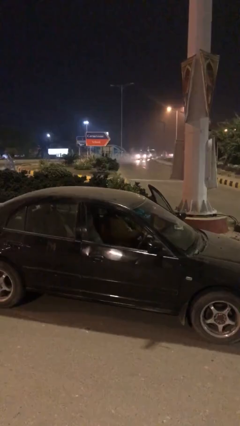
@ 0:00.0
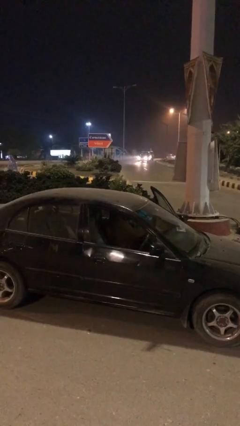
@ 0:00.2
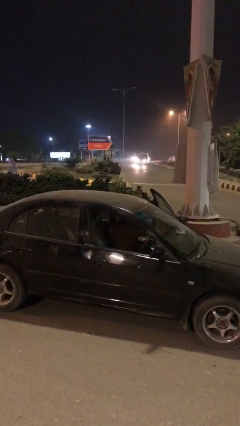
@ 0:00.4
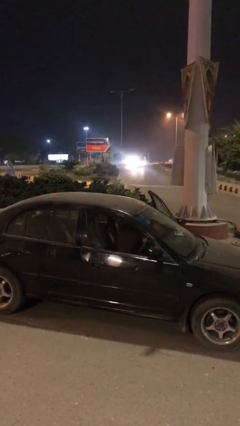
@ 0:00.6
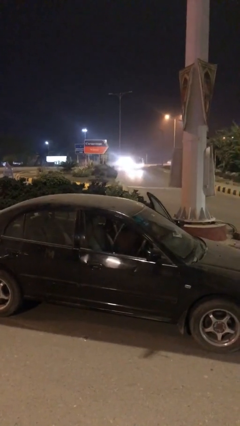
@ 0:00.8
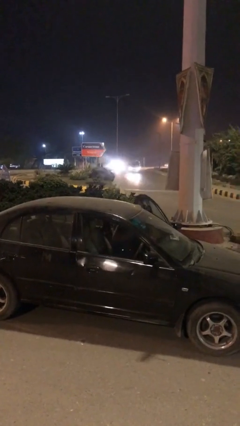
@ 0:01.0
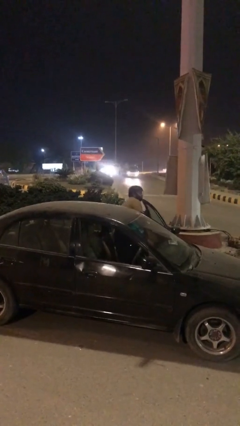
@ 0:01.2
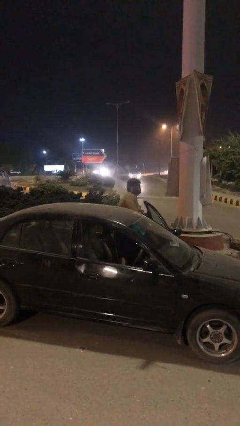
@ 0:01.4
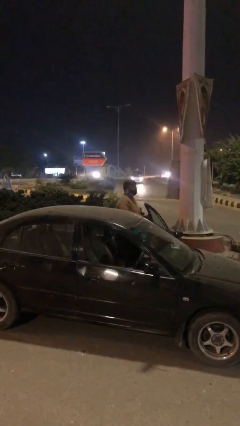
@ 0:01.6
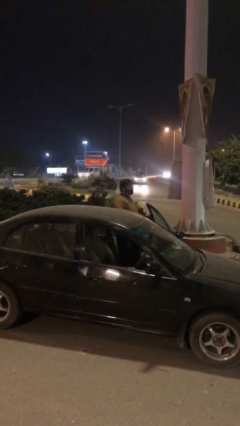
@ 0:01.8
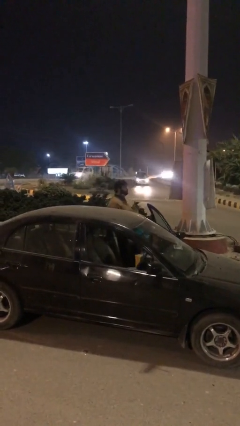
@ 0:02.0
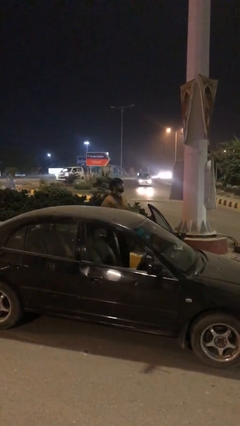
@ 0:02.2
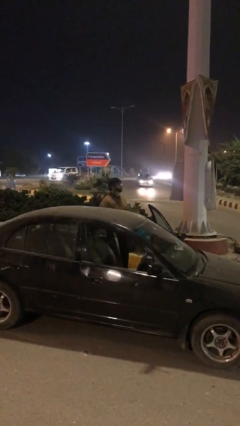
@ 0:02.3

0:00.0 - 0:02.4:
person exits car

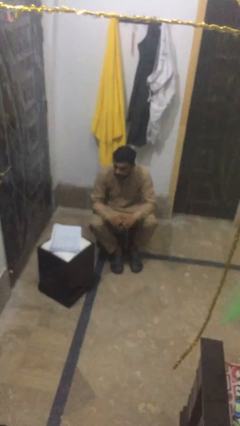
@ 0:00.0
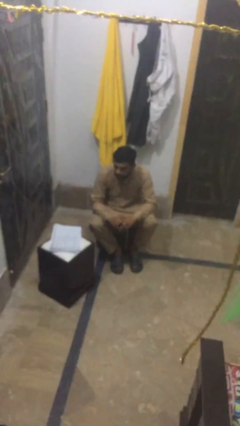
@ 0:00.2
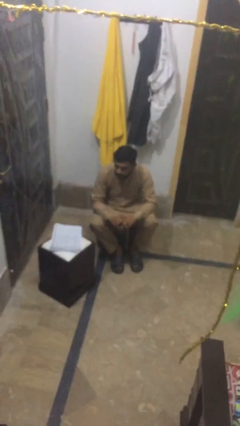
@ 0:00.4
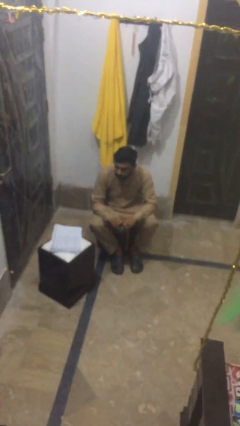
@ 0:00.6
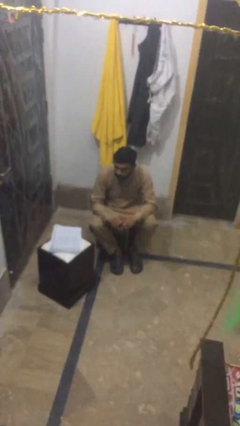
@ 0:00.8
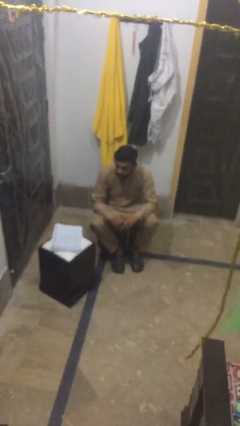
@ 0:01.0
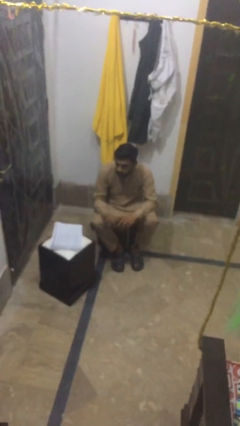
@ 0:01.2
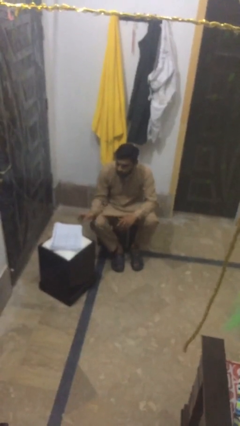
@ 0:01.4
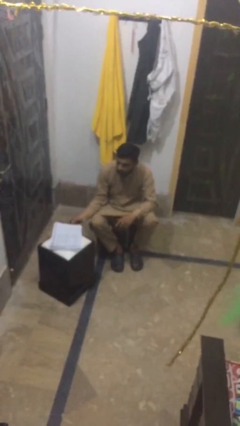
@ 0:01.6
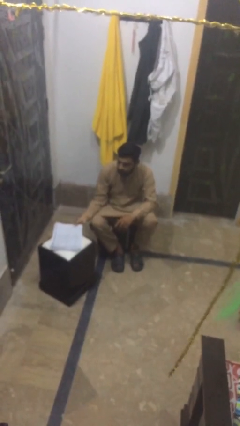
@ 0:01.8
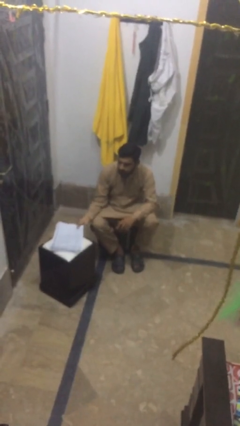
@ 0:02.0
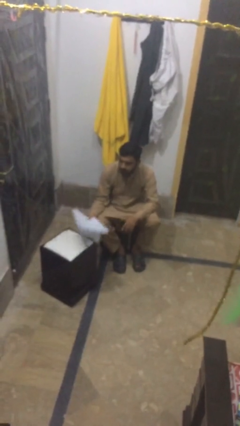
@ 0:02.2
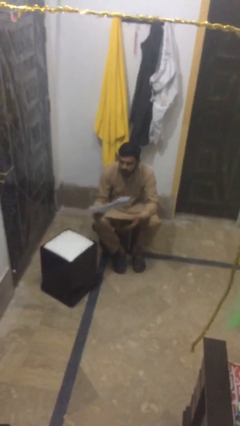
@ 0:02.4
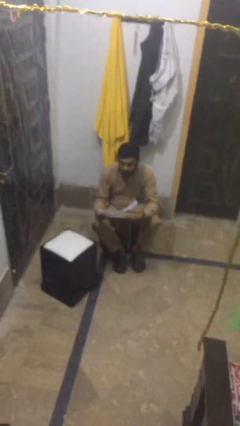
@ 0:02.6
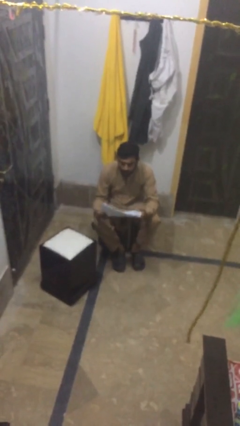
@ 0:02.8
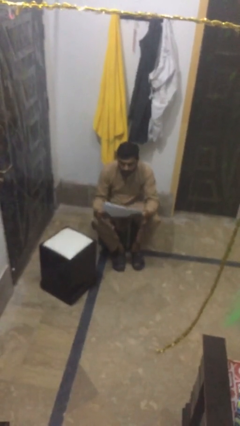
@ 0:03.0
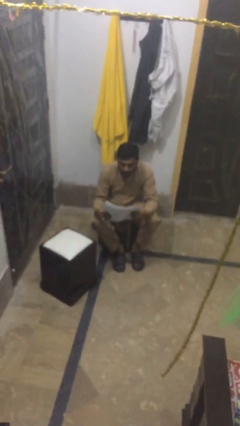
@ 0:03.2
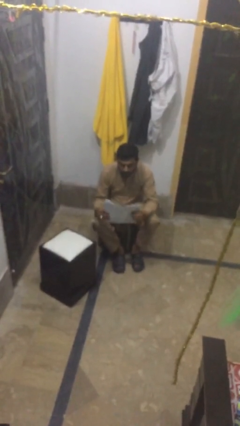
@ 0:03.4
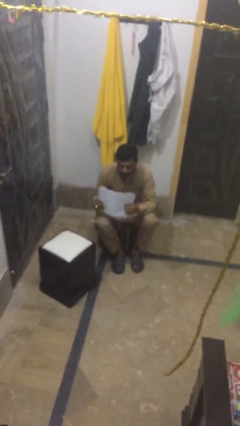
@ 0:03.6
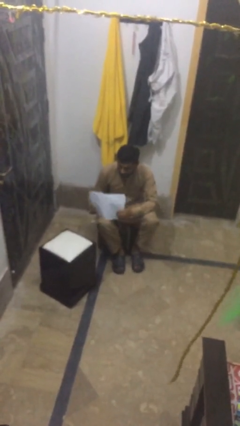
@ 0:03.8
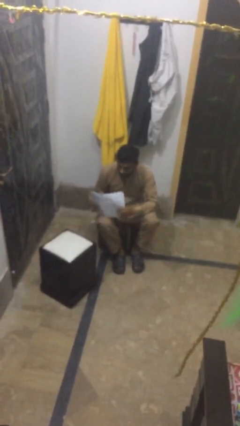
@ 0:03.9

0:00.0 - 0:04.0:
person picks up object from table

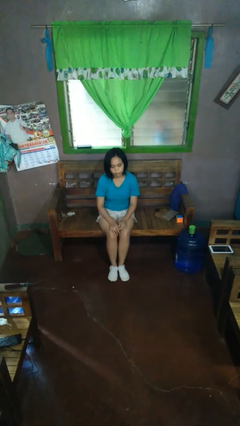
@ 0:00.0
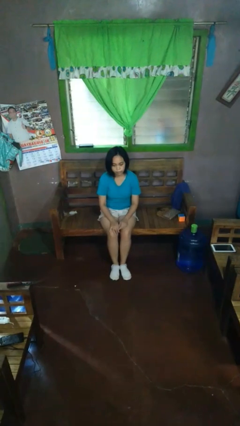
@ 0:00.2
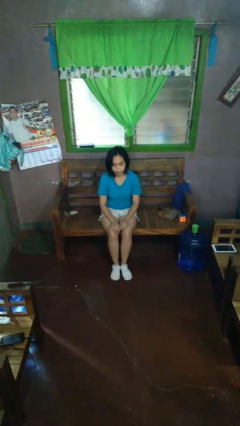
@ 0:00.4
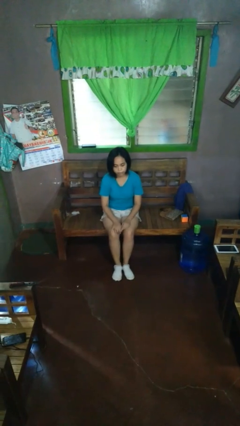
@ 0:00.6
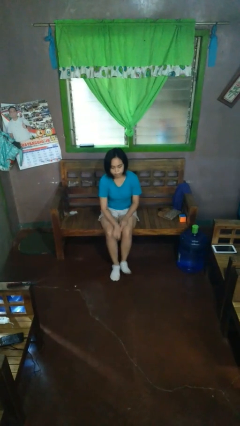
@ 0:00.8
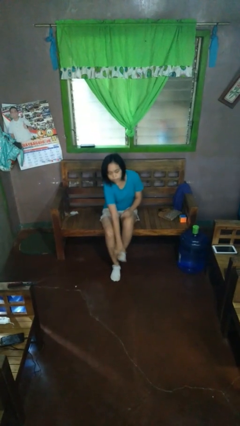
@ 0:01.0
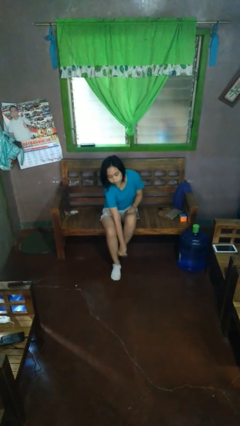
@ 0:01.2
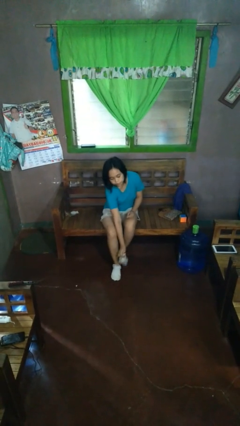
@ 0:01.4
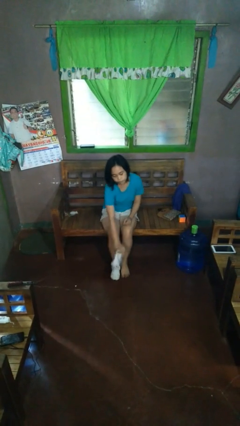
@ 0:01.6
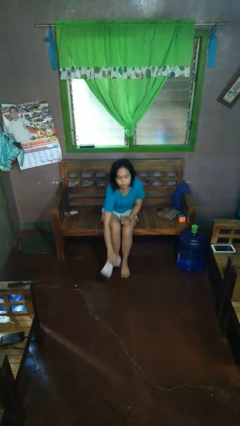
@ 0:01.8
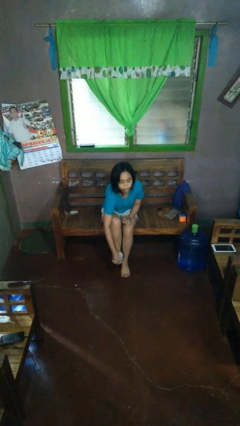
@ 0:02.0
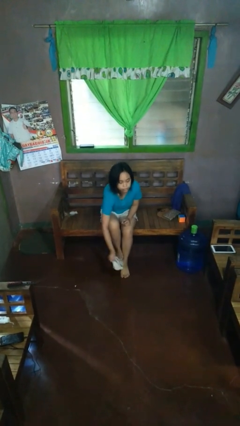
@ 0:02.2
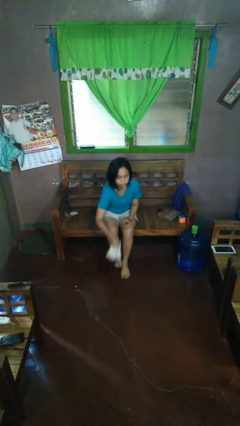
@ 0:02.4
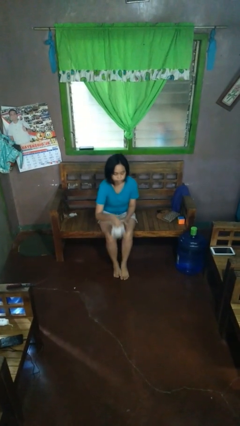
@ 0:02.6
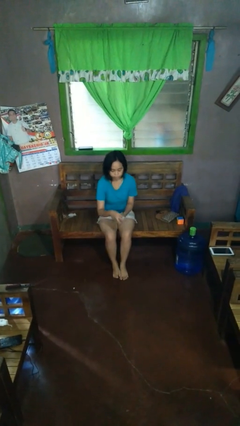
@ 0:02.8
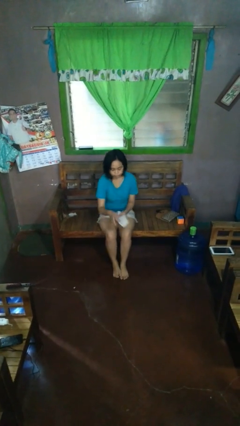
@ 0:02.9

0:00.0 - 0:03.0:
person takes off socks

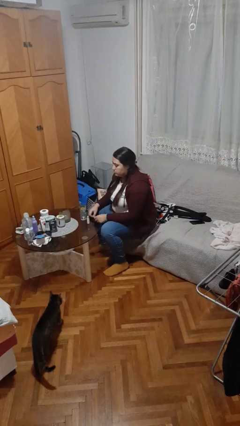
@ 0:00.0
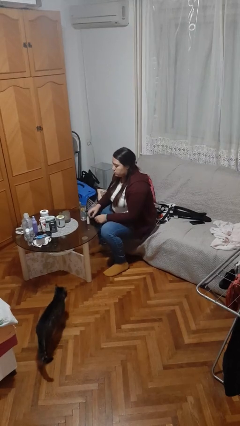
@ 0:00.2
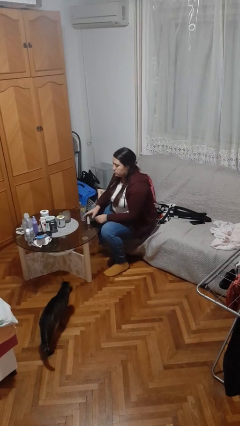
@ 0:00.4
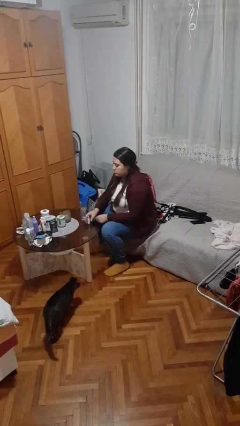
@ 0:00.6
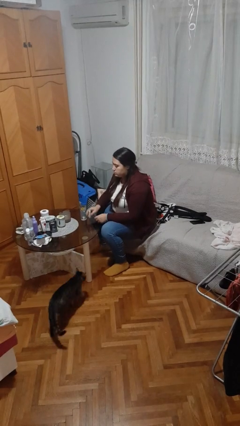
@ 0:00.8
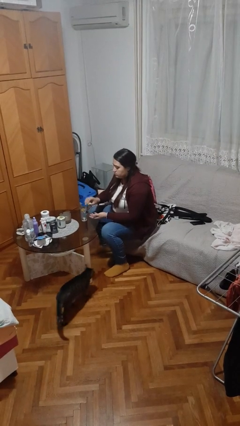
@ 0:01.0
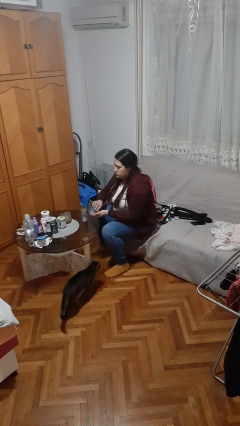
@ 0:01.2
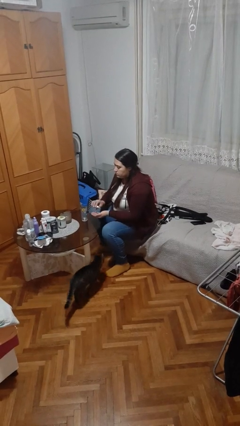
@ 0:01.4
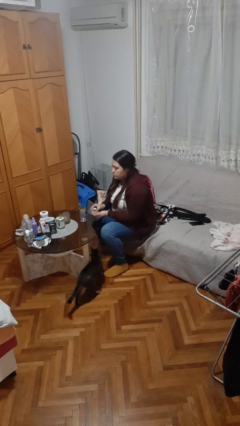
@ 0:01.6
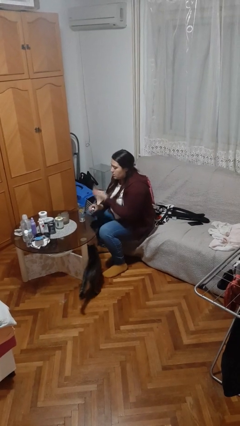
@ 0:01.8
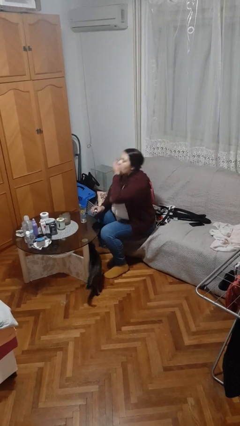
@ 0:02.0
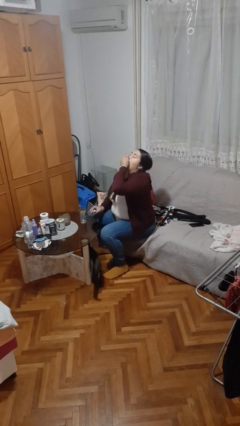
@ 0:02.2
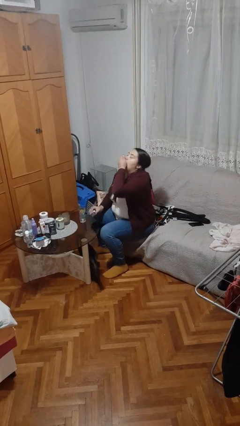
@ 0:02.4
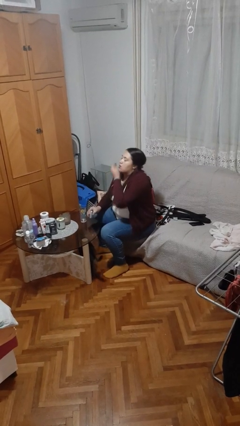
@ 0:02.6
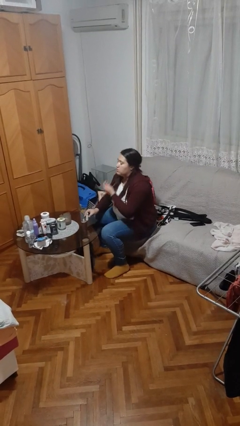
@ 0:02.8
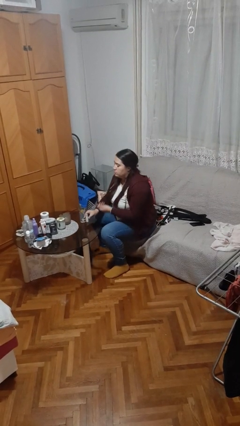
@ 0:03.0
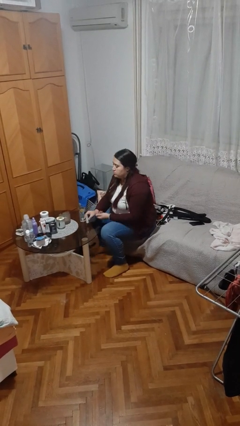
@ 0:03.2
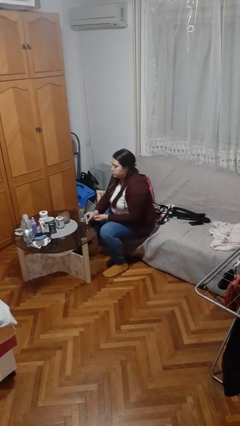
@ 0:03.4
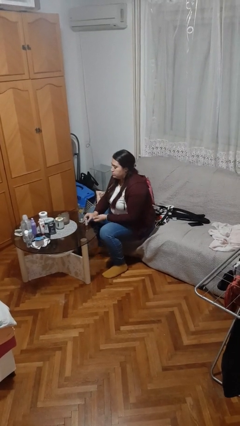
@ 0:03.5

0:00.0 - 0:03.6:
person takes medicine pills

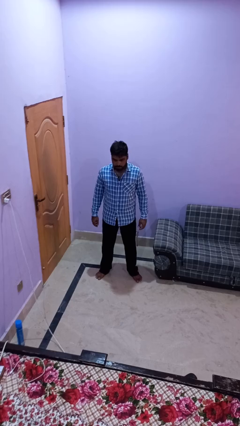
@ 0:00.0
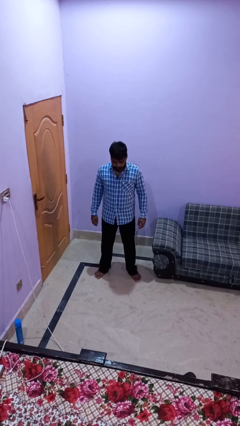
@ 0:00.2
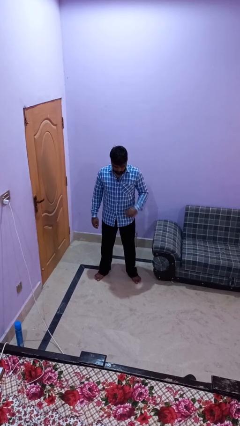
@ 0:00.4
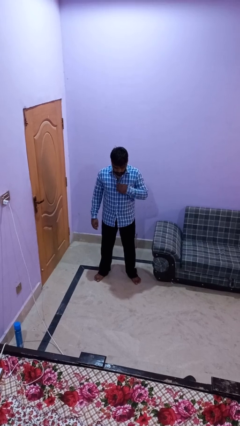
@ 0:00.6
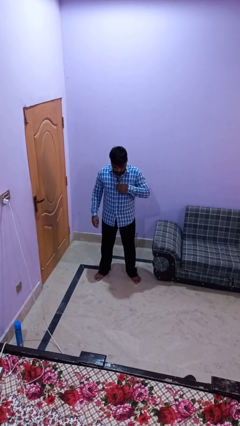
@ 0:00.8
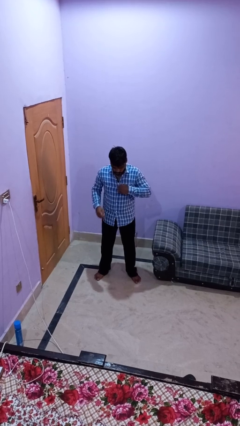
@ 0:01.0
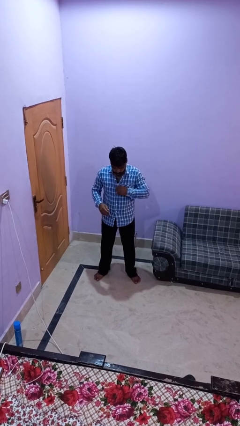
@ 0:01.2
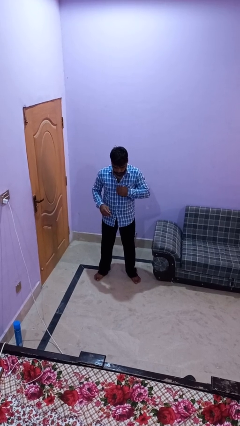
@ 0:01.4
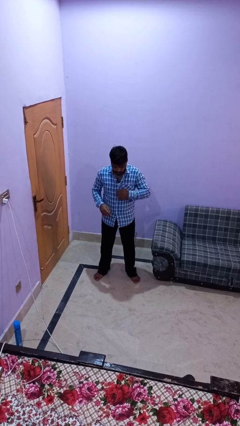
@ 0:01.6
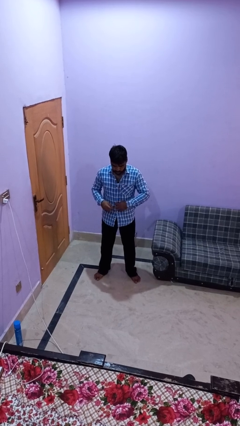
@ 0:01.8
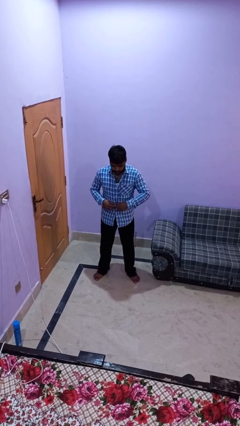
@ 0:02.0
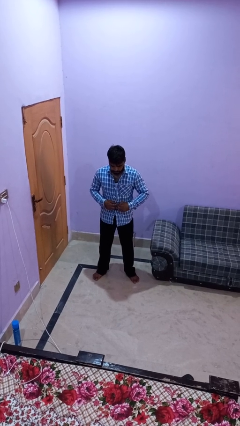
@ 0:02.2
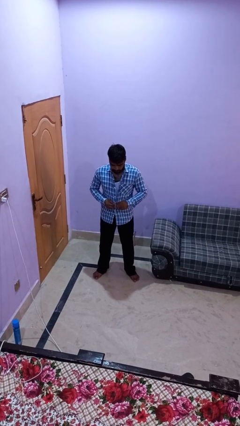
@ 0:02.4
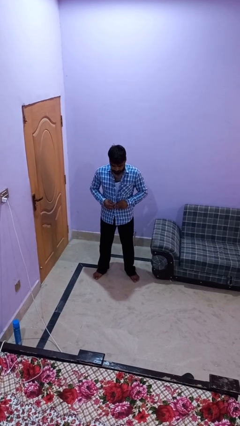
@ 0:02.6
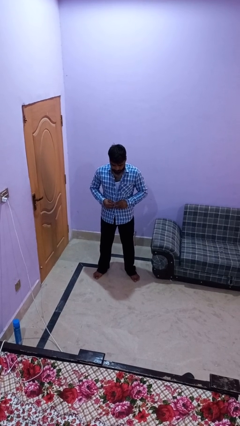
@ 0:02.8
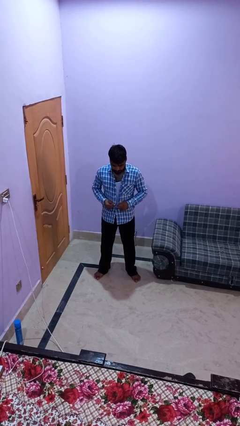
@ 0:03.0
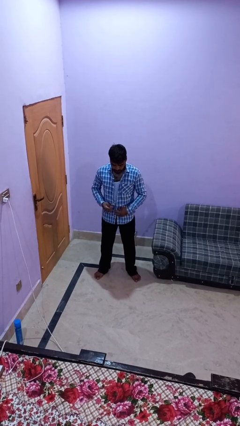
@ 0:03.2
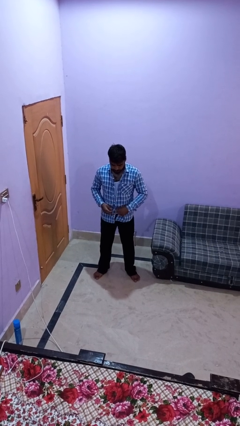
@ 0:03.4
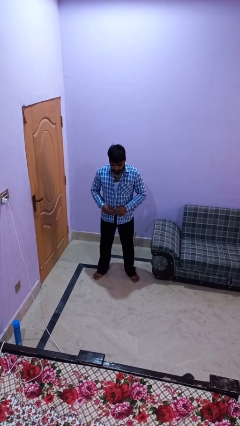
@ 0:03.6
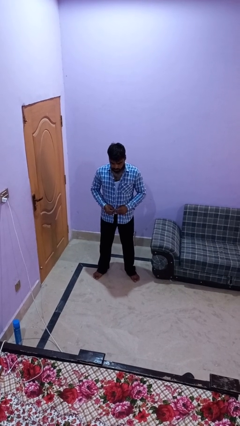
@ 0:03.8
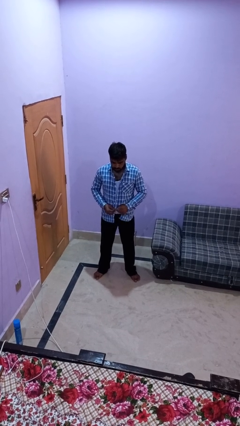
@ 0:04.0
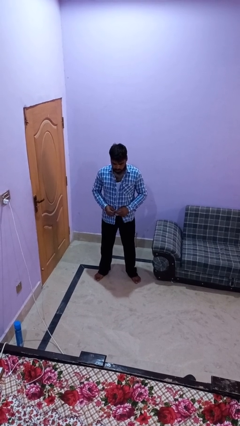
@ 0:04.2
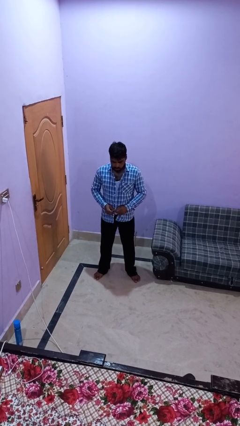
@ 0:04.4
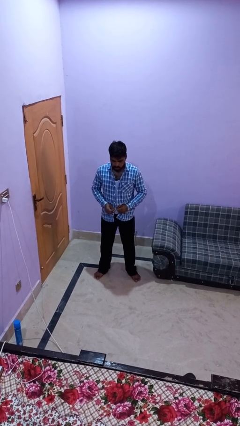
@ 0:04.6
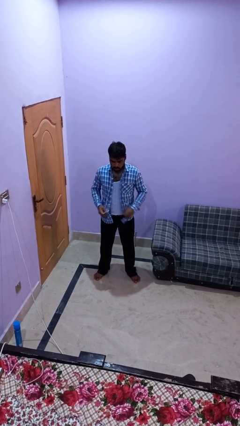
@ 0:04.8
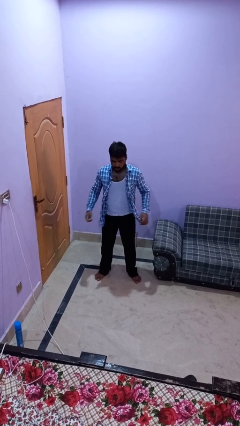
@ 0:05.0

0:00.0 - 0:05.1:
person unbuttons shirt
